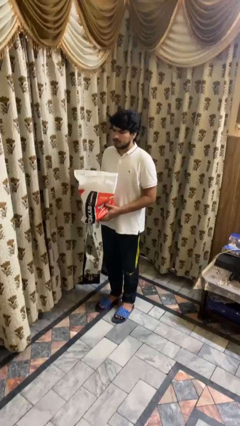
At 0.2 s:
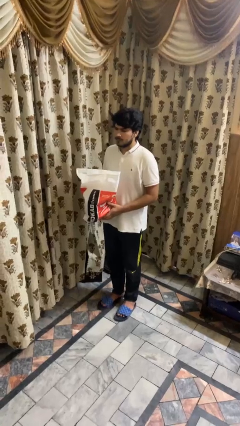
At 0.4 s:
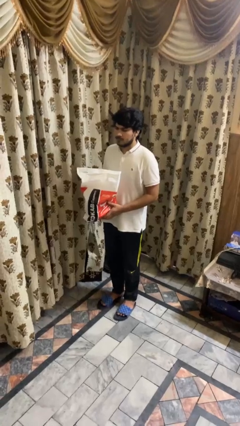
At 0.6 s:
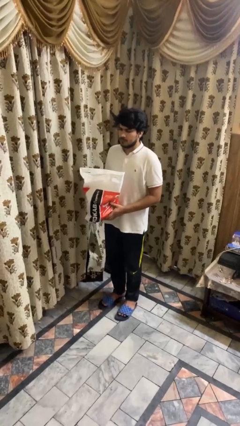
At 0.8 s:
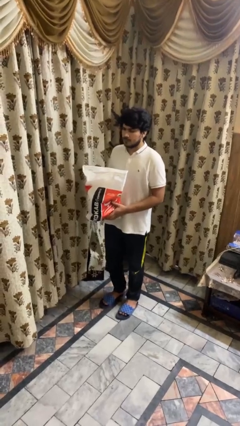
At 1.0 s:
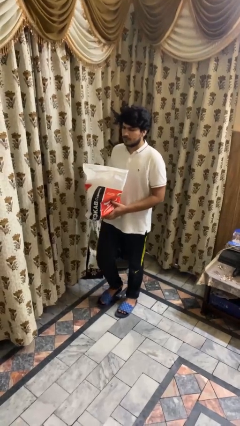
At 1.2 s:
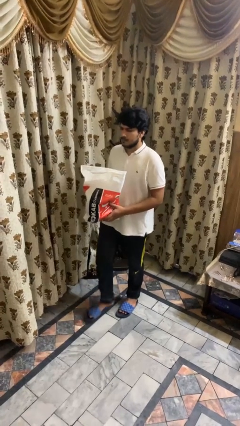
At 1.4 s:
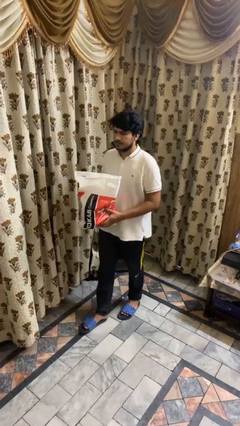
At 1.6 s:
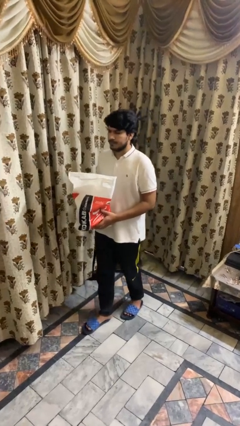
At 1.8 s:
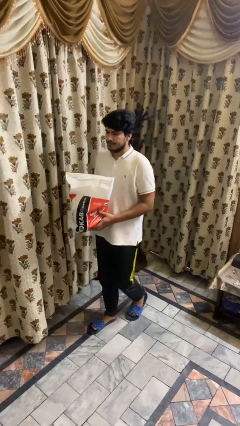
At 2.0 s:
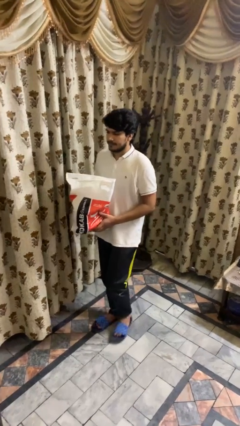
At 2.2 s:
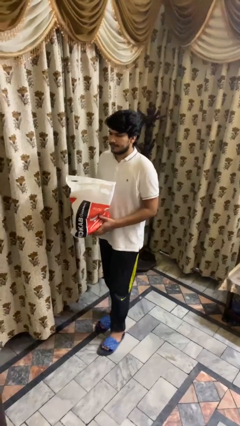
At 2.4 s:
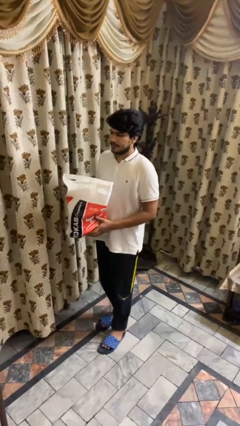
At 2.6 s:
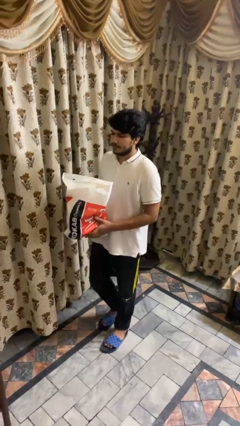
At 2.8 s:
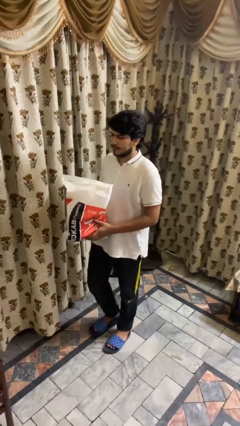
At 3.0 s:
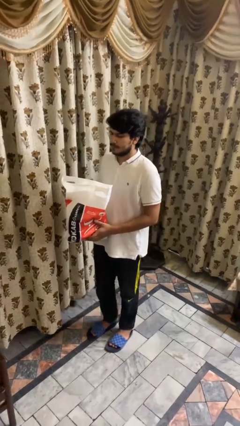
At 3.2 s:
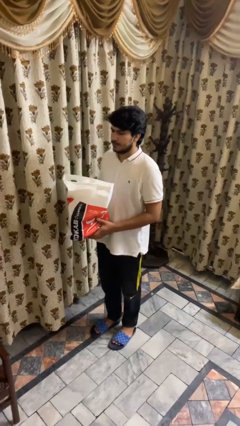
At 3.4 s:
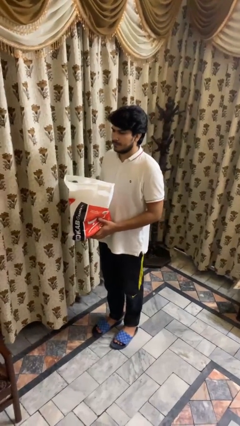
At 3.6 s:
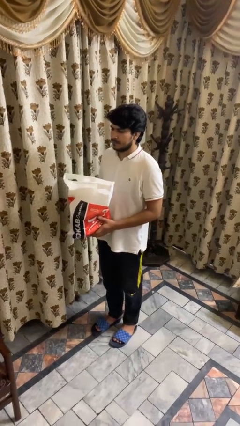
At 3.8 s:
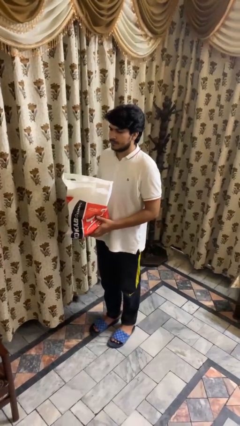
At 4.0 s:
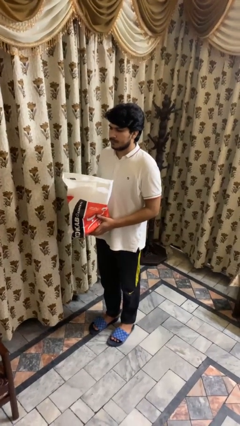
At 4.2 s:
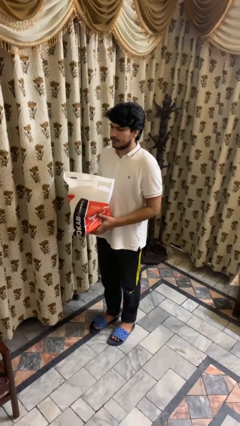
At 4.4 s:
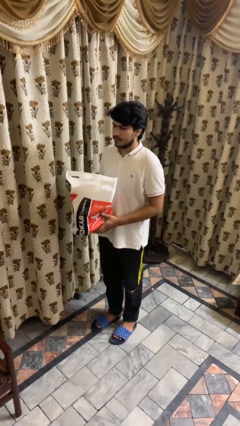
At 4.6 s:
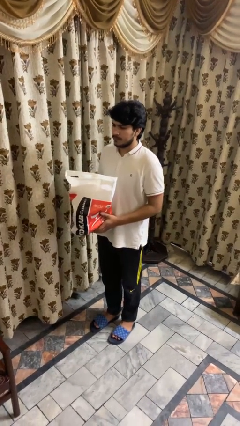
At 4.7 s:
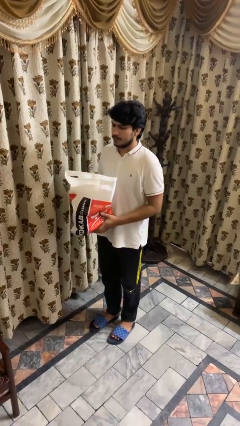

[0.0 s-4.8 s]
person carries groceries

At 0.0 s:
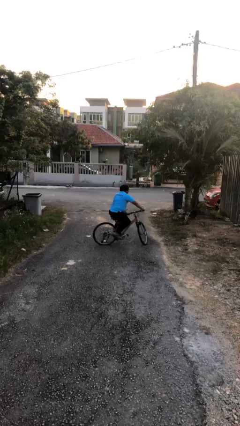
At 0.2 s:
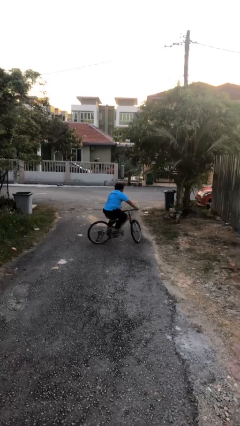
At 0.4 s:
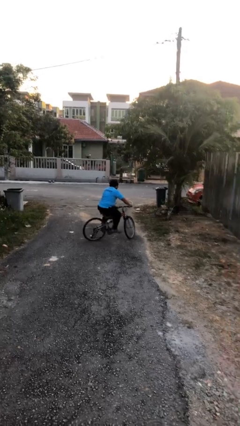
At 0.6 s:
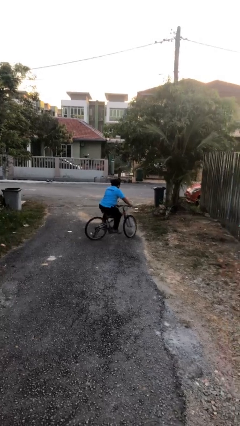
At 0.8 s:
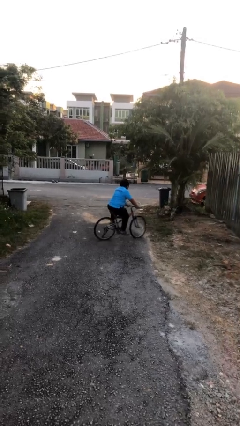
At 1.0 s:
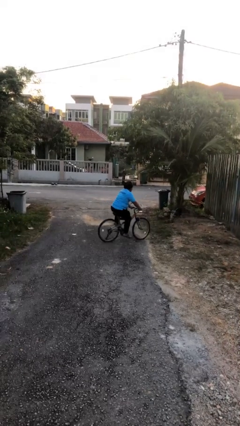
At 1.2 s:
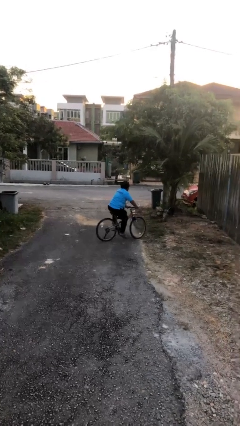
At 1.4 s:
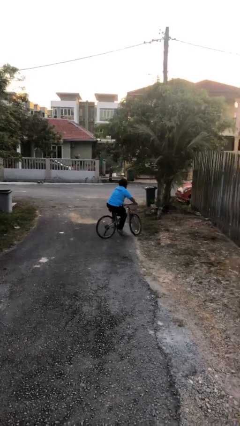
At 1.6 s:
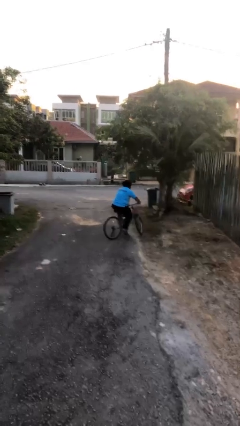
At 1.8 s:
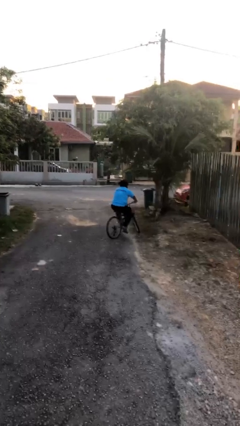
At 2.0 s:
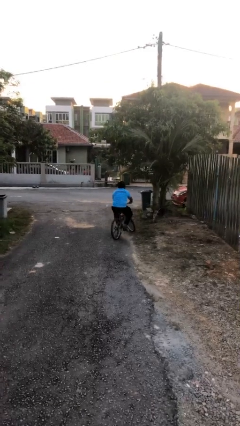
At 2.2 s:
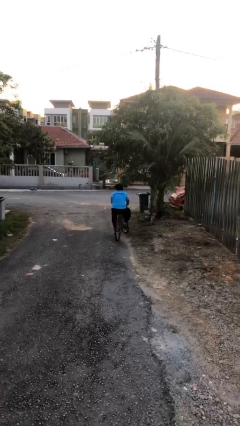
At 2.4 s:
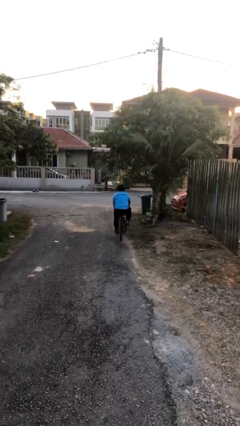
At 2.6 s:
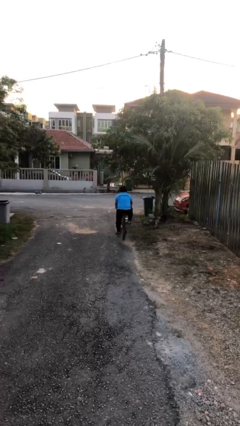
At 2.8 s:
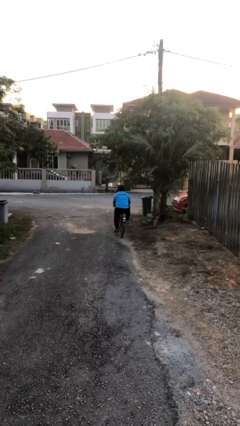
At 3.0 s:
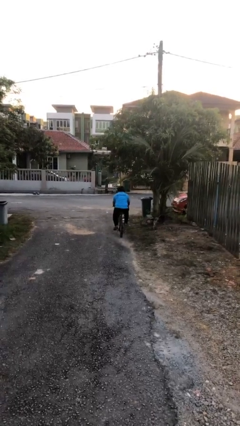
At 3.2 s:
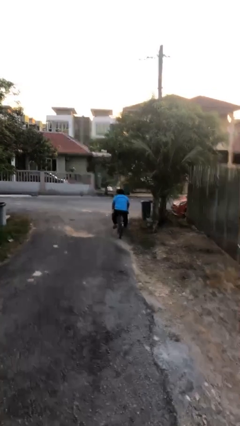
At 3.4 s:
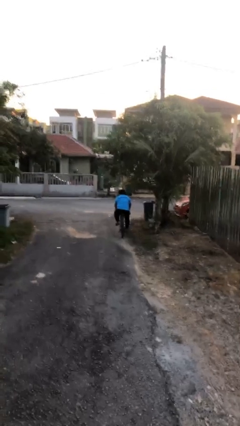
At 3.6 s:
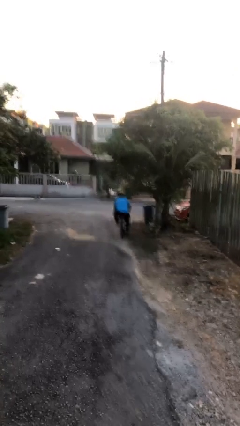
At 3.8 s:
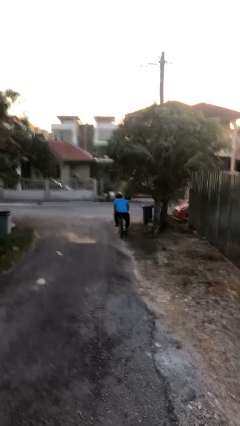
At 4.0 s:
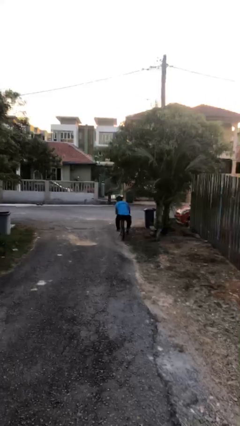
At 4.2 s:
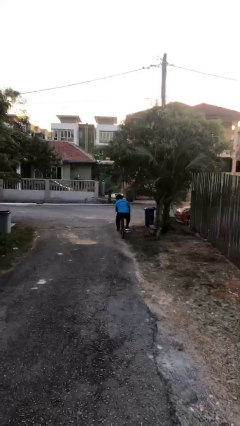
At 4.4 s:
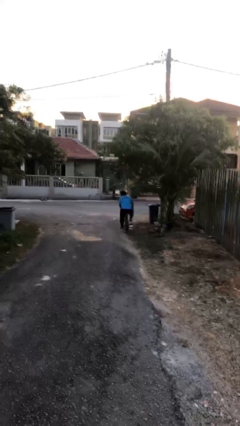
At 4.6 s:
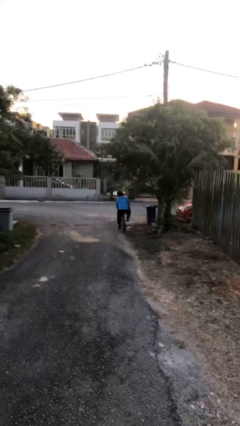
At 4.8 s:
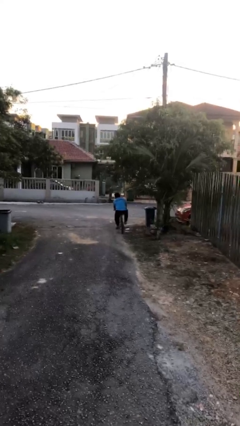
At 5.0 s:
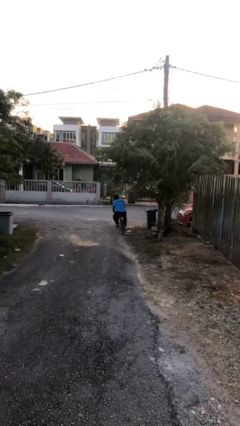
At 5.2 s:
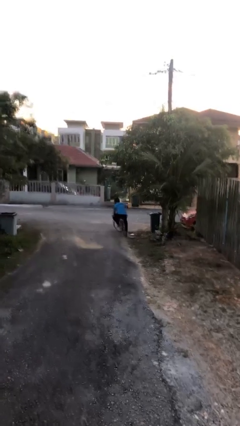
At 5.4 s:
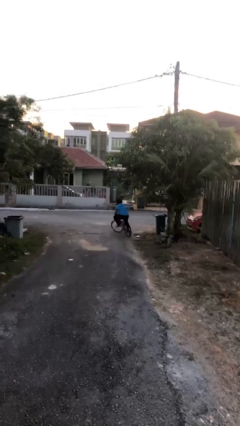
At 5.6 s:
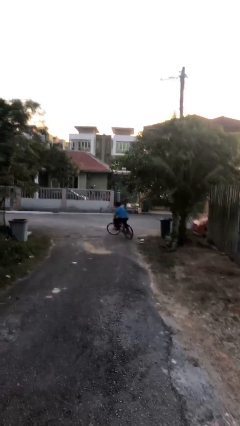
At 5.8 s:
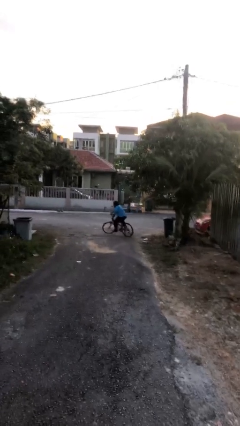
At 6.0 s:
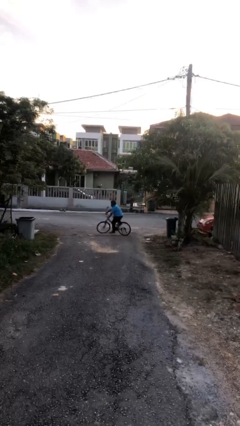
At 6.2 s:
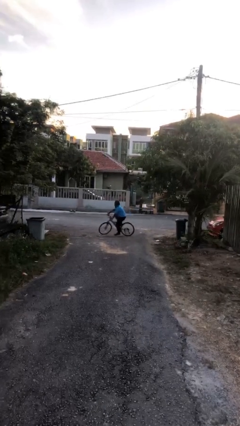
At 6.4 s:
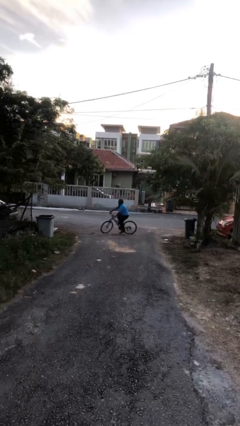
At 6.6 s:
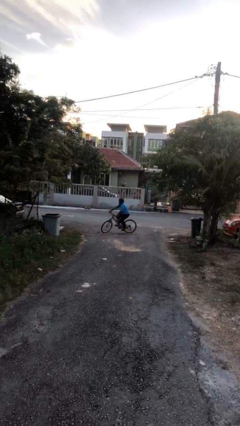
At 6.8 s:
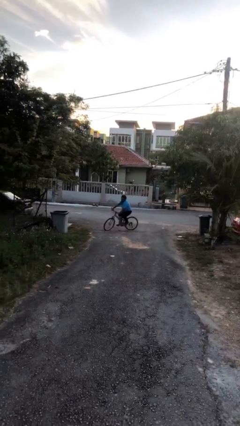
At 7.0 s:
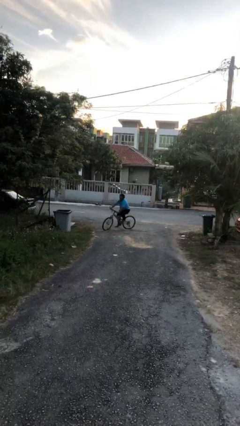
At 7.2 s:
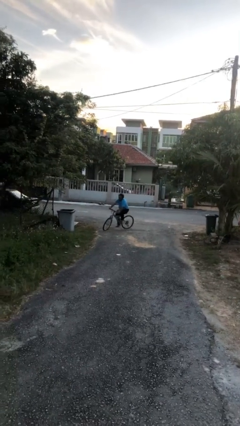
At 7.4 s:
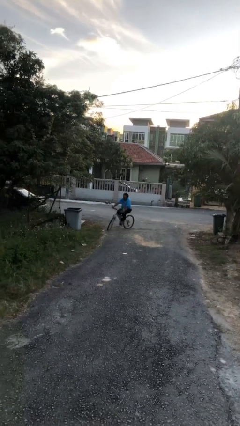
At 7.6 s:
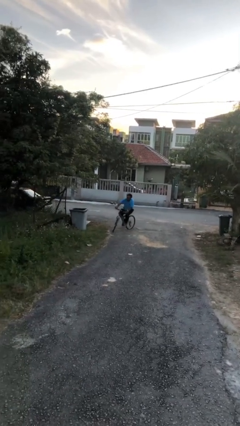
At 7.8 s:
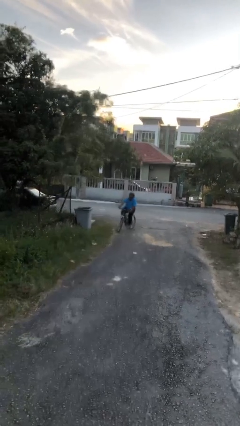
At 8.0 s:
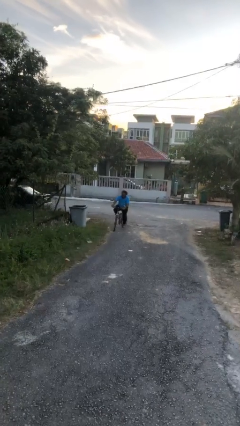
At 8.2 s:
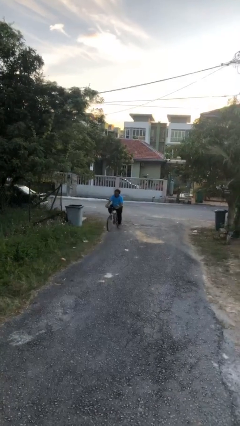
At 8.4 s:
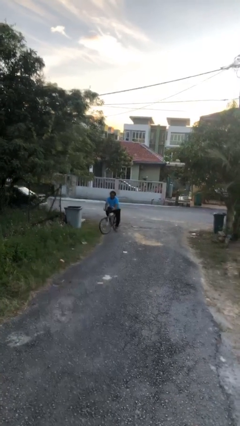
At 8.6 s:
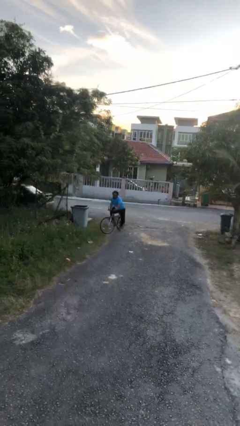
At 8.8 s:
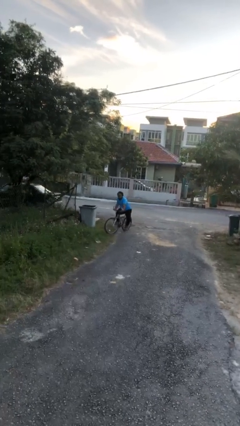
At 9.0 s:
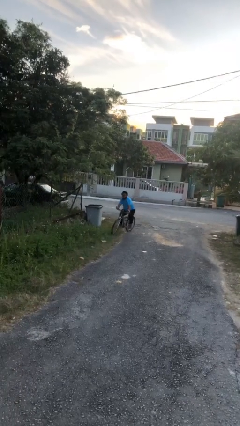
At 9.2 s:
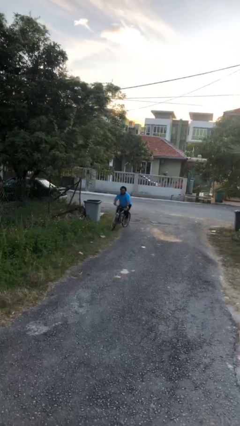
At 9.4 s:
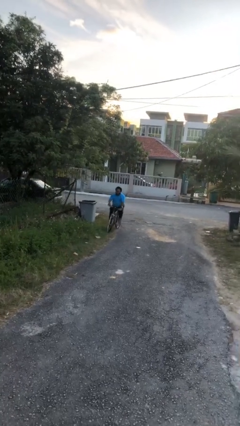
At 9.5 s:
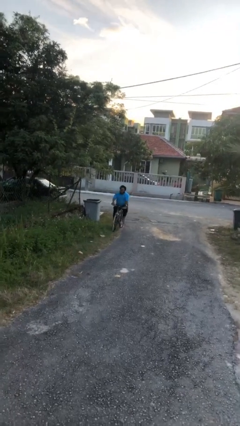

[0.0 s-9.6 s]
person rides bicycle

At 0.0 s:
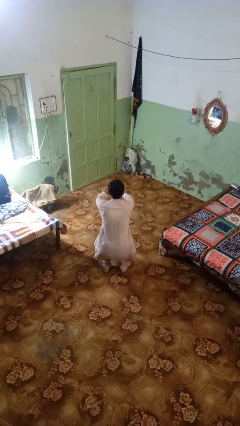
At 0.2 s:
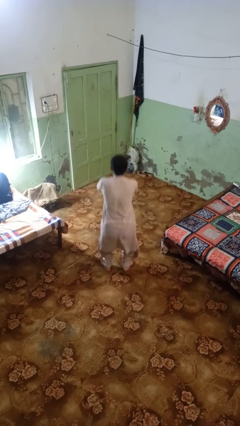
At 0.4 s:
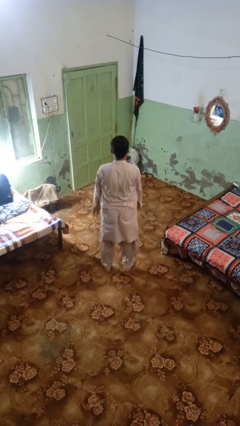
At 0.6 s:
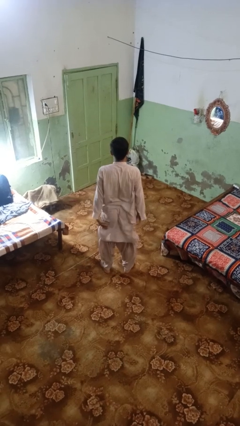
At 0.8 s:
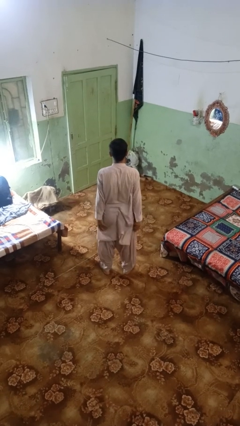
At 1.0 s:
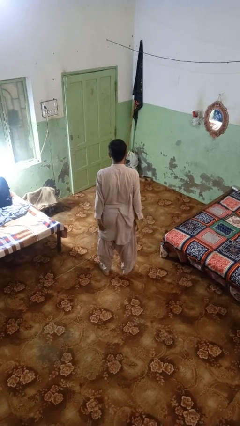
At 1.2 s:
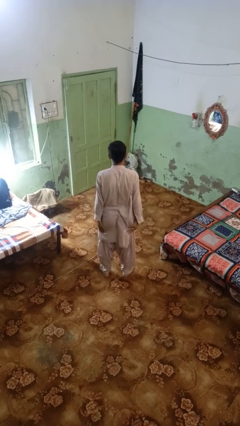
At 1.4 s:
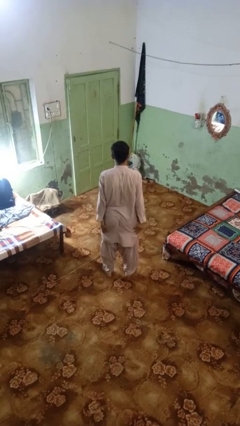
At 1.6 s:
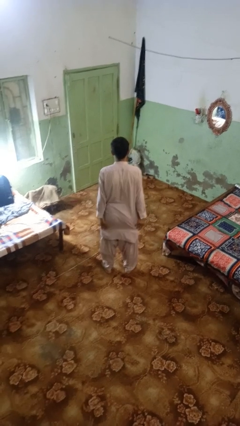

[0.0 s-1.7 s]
person stands up

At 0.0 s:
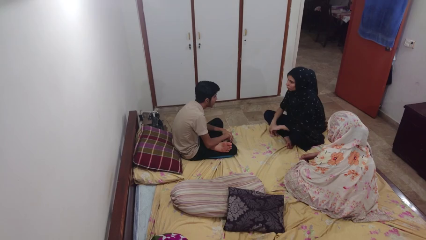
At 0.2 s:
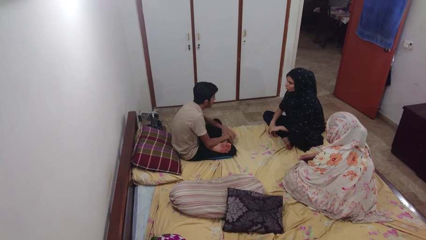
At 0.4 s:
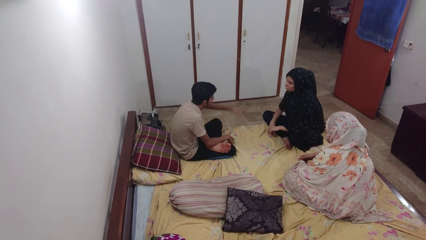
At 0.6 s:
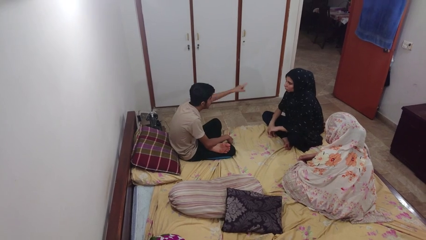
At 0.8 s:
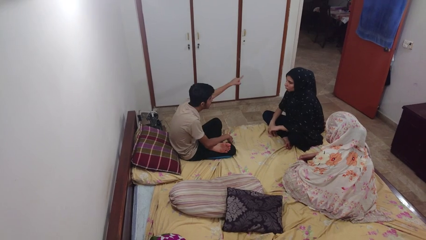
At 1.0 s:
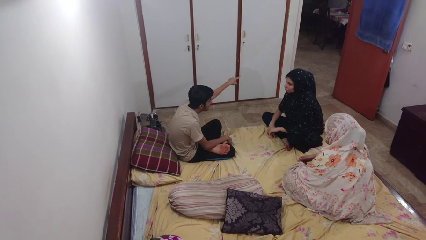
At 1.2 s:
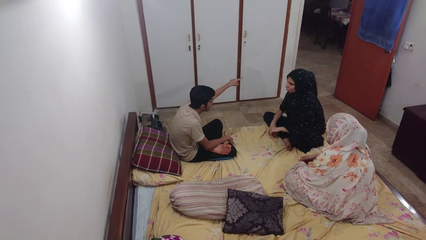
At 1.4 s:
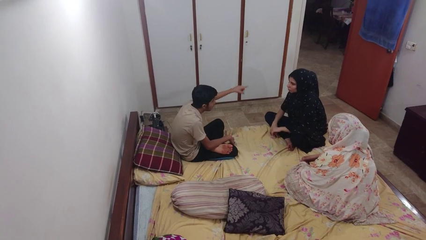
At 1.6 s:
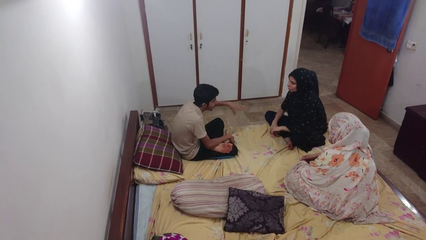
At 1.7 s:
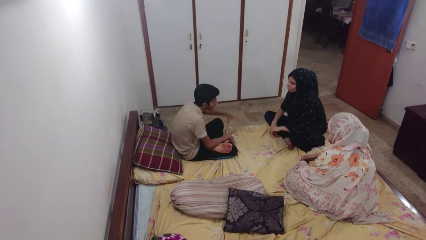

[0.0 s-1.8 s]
person points at person
